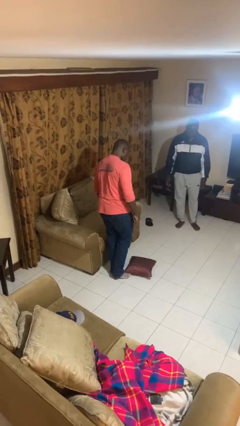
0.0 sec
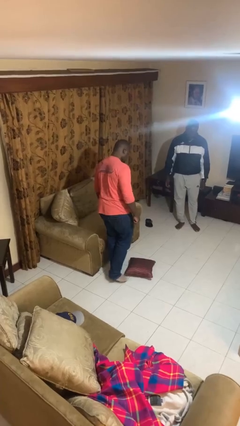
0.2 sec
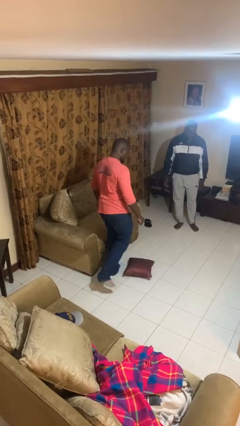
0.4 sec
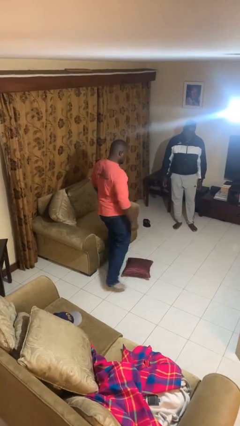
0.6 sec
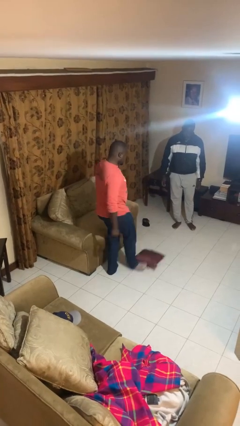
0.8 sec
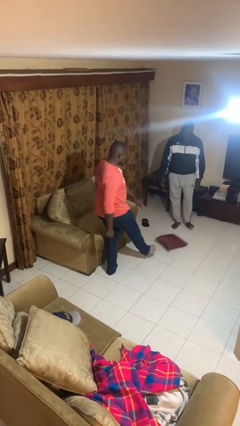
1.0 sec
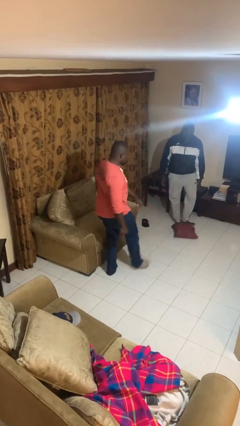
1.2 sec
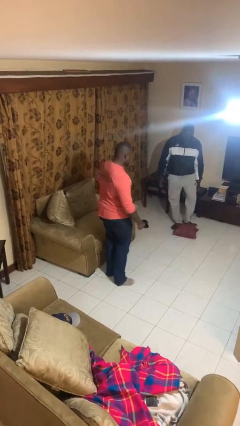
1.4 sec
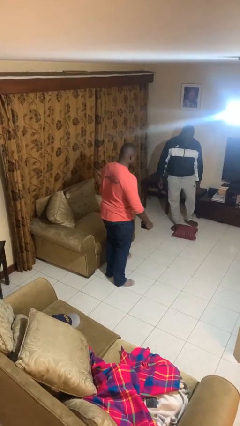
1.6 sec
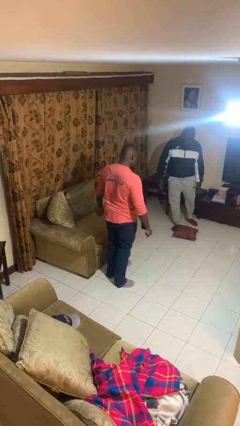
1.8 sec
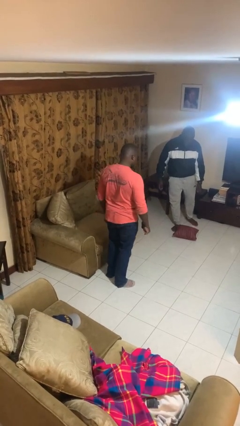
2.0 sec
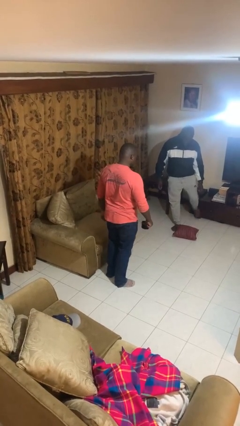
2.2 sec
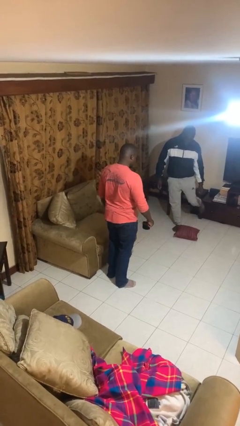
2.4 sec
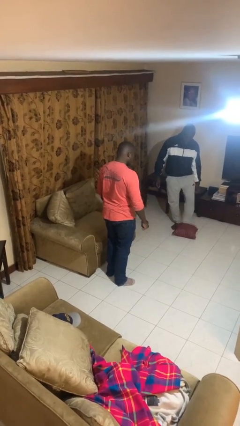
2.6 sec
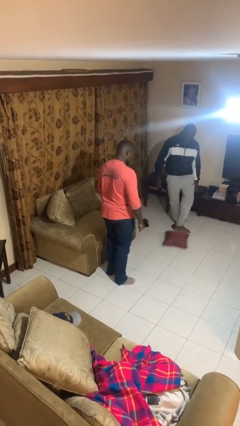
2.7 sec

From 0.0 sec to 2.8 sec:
person kicks object to person

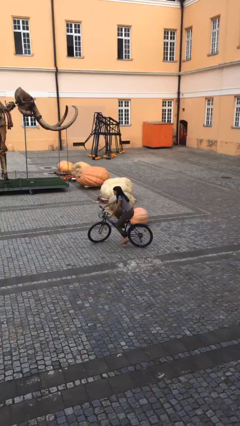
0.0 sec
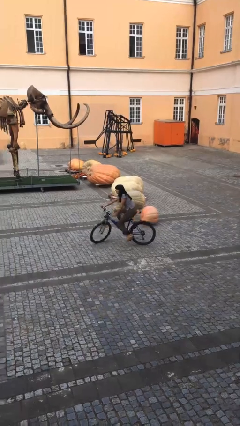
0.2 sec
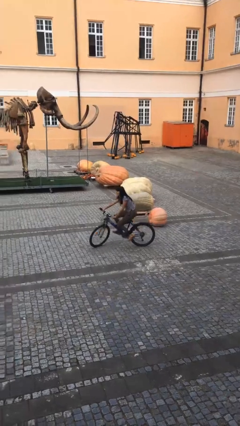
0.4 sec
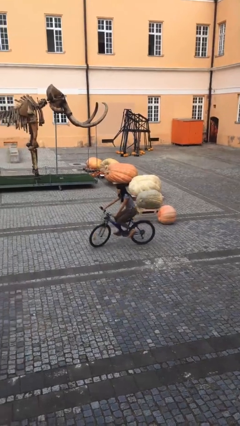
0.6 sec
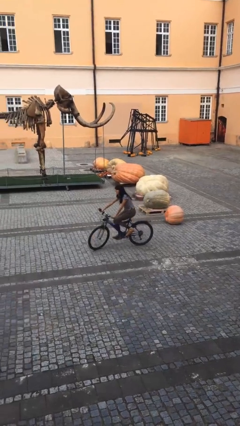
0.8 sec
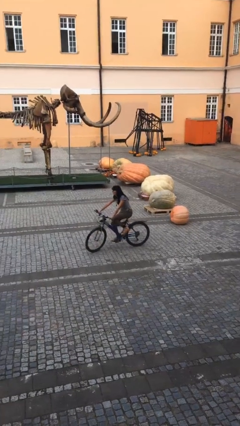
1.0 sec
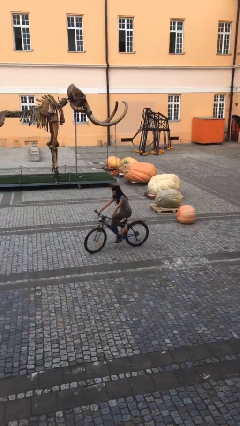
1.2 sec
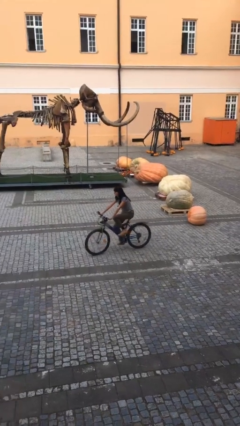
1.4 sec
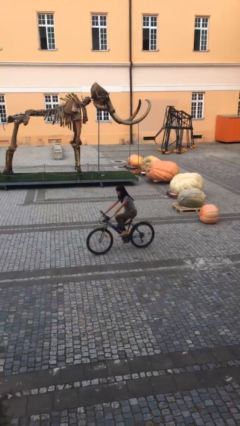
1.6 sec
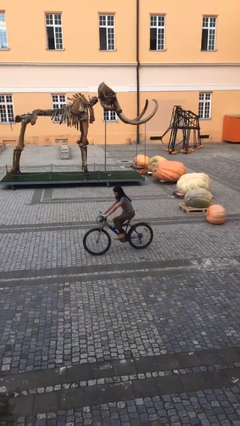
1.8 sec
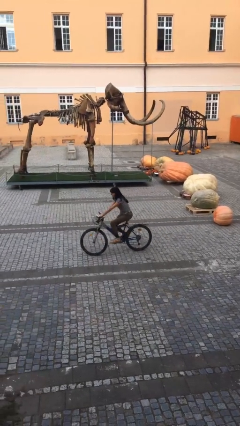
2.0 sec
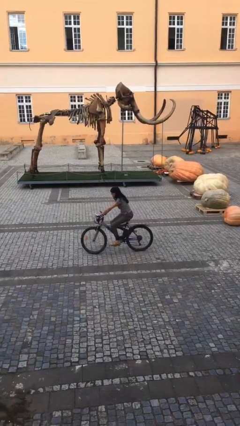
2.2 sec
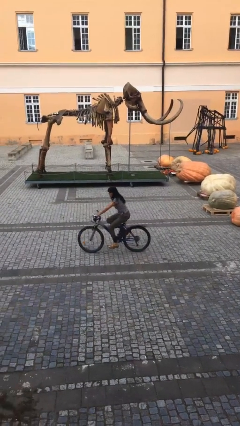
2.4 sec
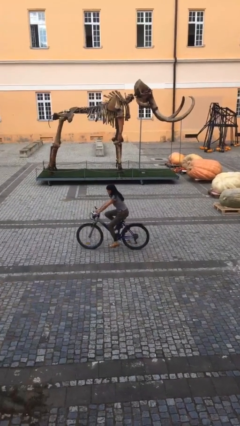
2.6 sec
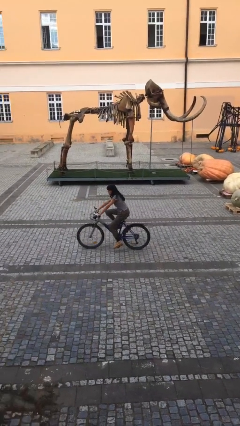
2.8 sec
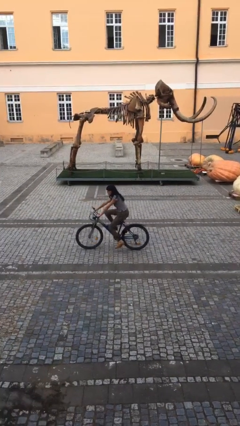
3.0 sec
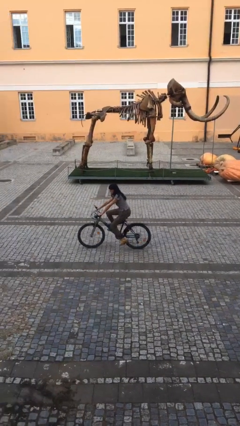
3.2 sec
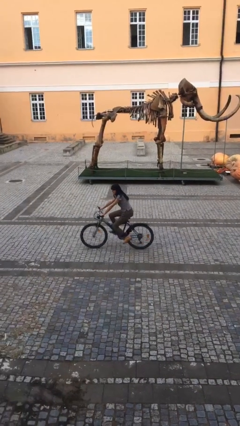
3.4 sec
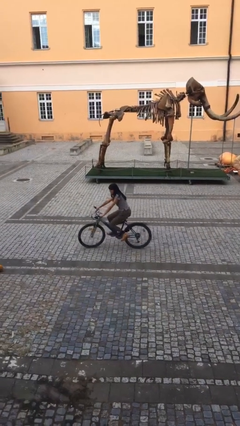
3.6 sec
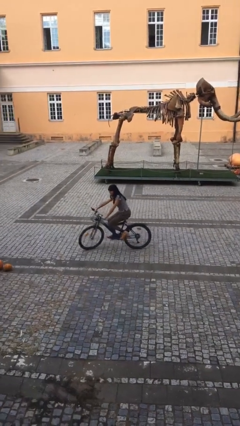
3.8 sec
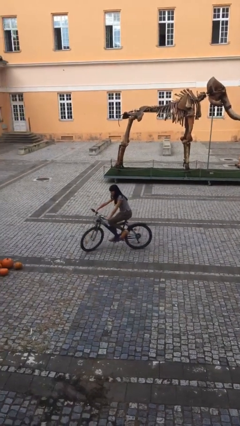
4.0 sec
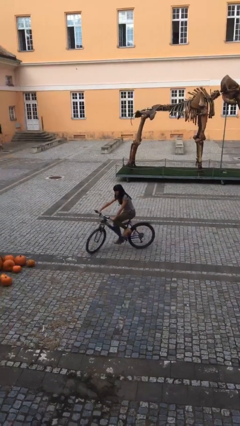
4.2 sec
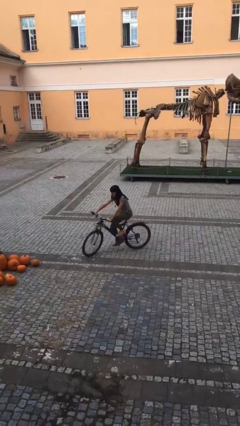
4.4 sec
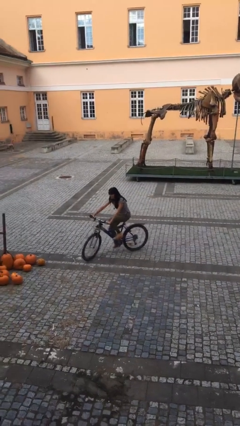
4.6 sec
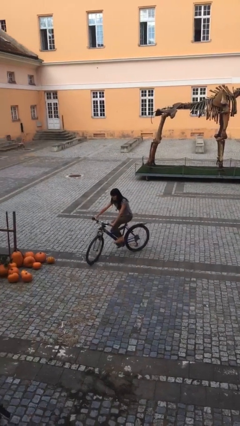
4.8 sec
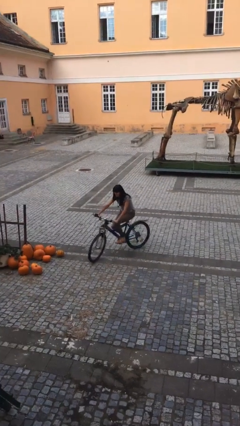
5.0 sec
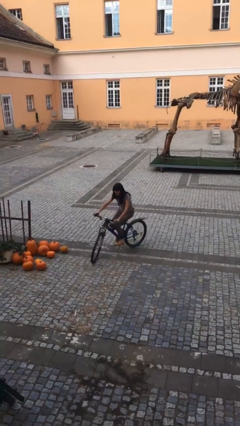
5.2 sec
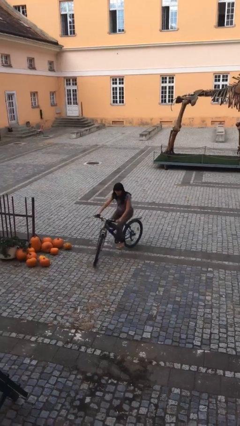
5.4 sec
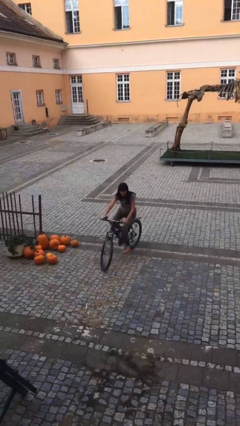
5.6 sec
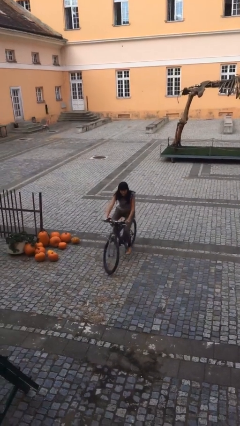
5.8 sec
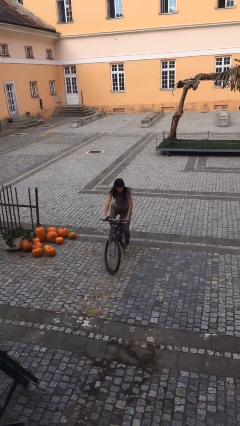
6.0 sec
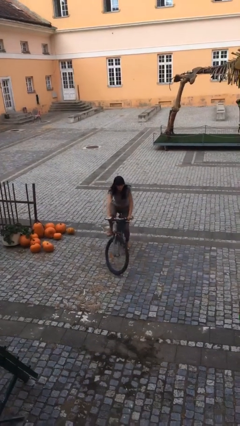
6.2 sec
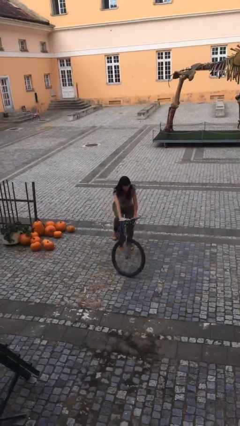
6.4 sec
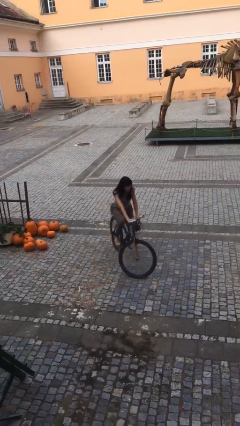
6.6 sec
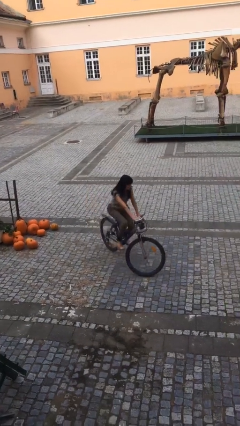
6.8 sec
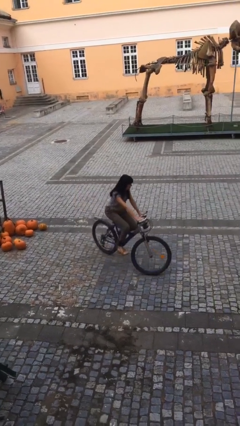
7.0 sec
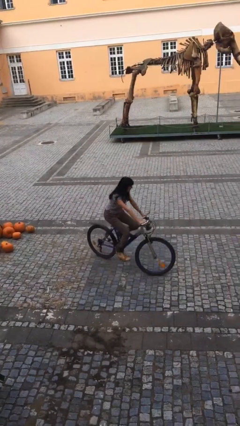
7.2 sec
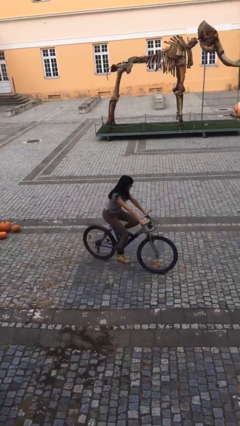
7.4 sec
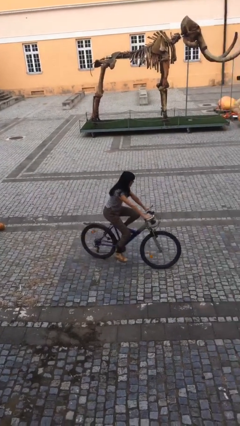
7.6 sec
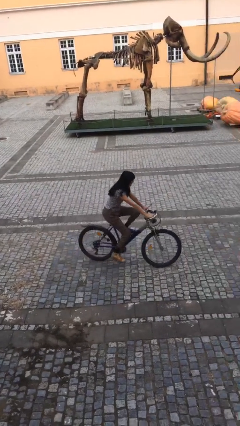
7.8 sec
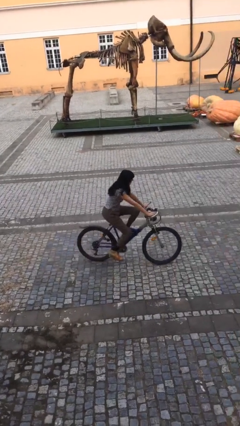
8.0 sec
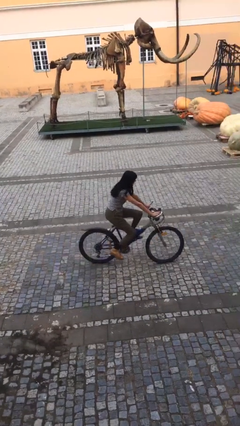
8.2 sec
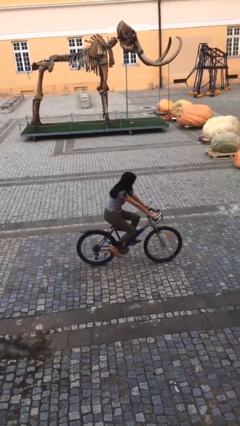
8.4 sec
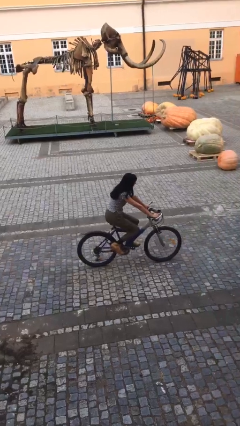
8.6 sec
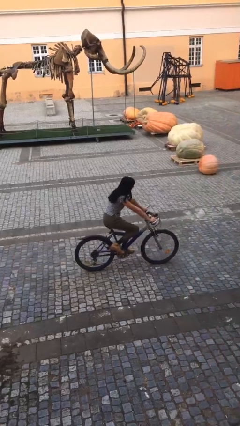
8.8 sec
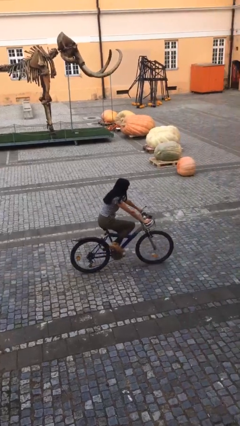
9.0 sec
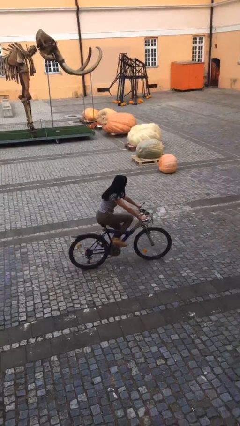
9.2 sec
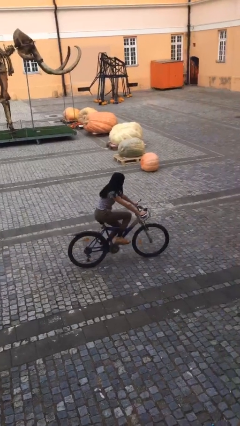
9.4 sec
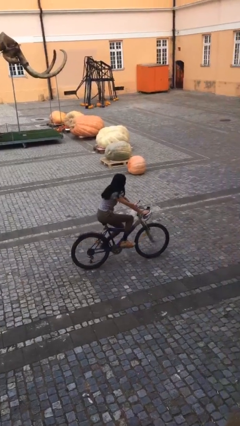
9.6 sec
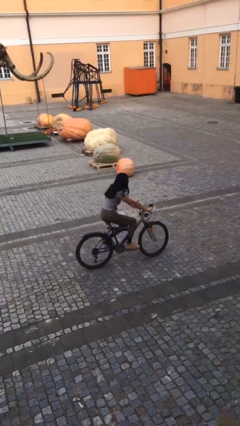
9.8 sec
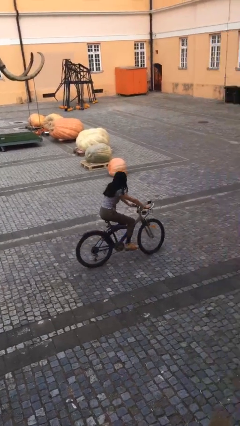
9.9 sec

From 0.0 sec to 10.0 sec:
person rides bicycle

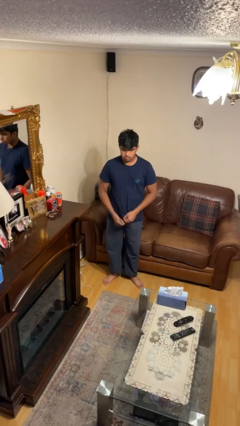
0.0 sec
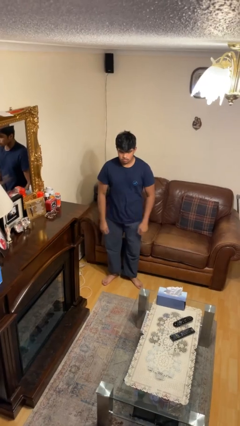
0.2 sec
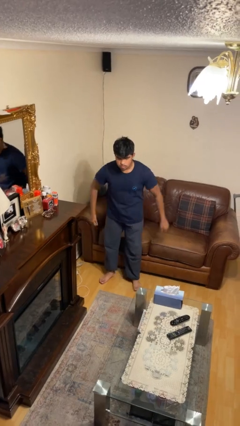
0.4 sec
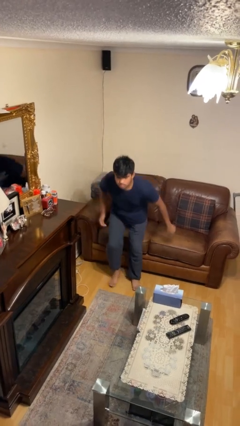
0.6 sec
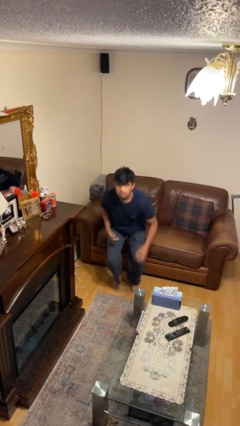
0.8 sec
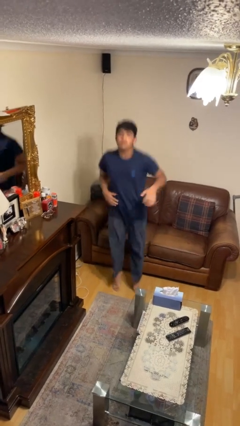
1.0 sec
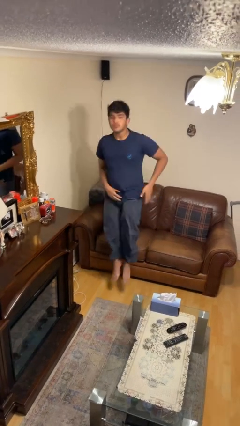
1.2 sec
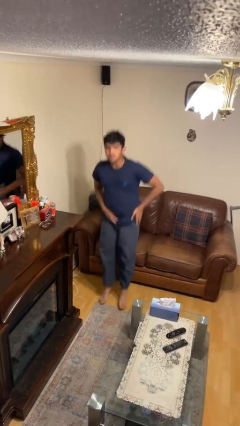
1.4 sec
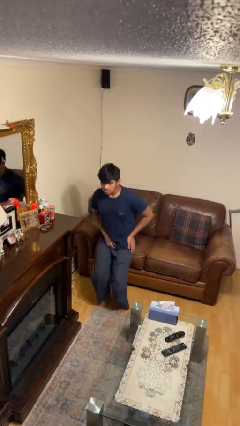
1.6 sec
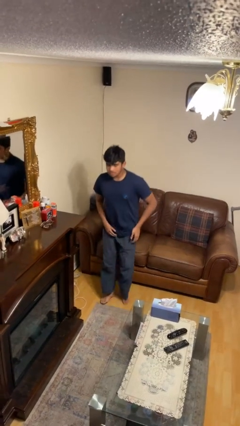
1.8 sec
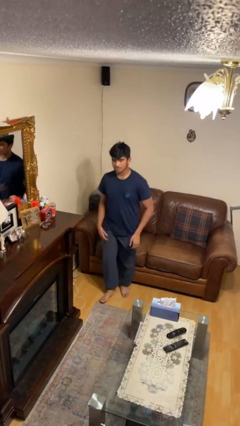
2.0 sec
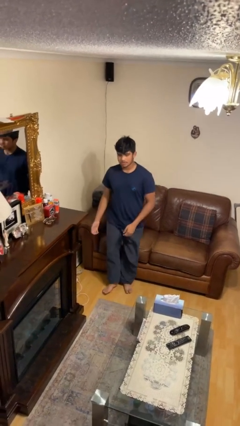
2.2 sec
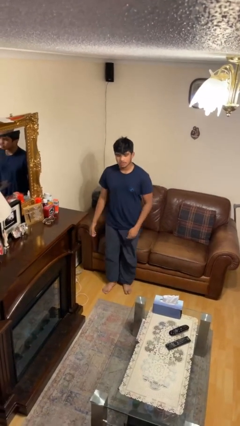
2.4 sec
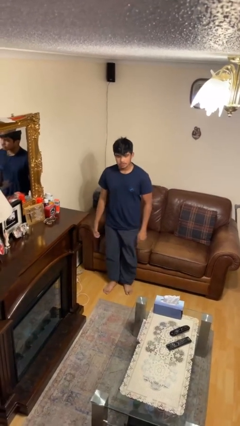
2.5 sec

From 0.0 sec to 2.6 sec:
person jumps

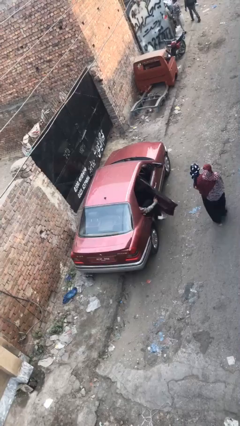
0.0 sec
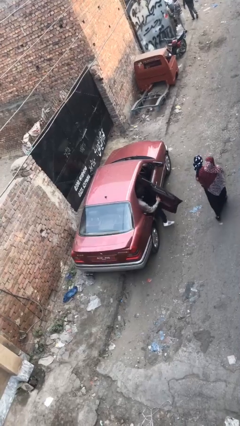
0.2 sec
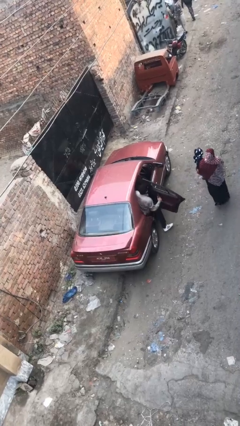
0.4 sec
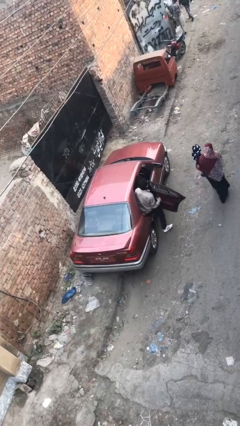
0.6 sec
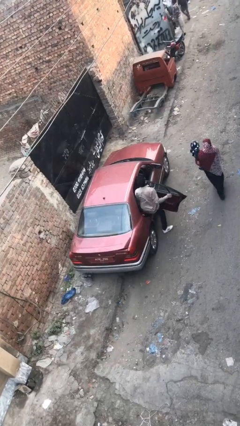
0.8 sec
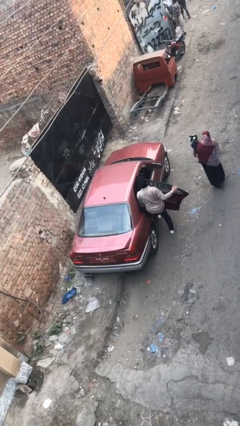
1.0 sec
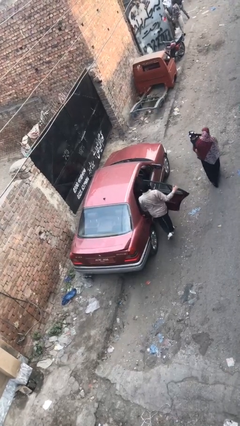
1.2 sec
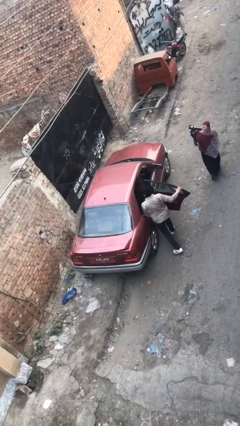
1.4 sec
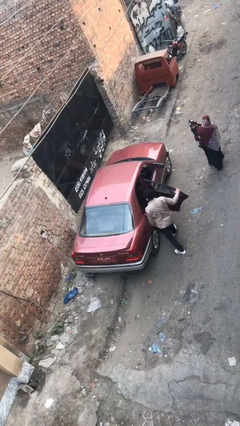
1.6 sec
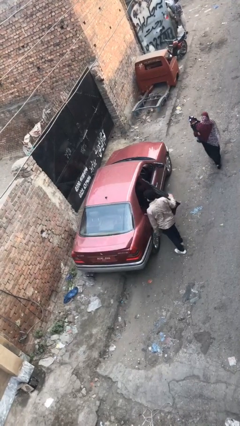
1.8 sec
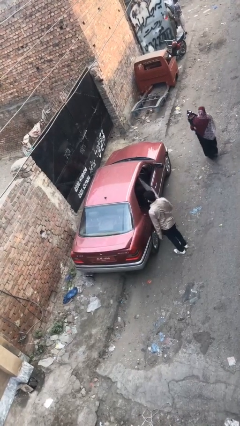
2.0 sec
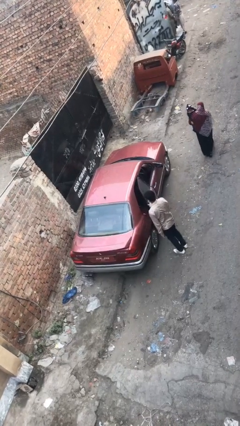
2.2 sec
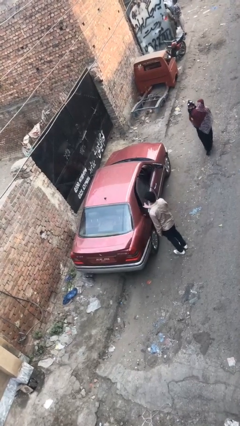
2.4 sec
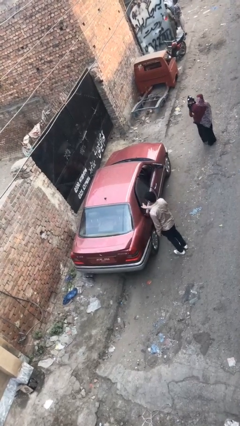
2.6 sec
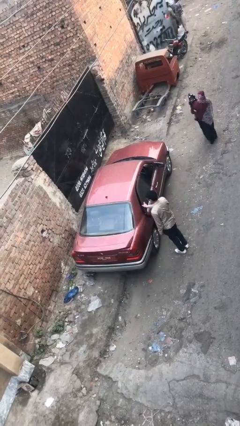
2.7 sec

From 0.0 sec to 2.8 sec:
car drops off person
